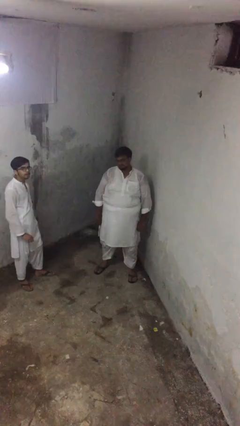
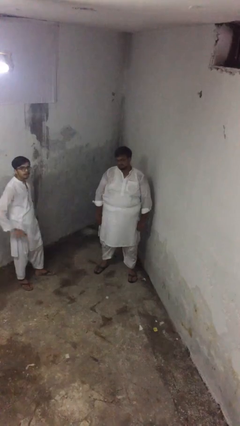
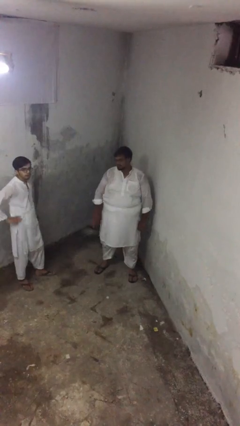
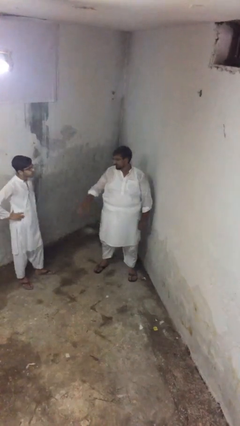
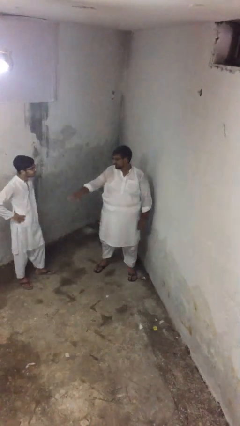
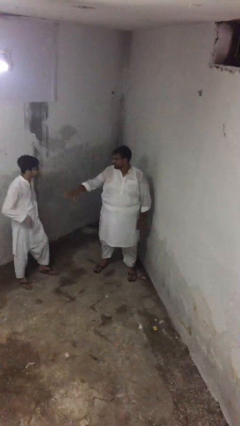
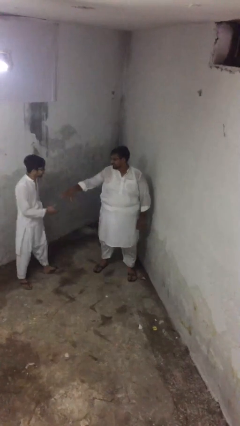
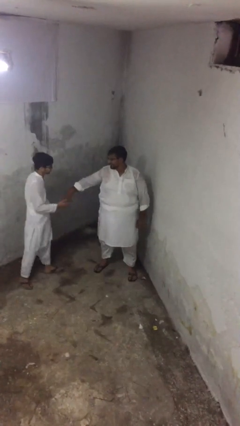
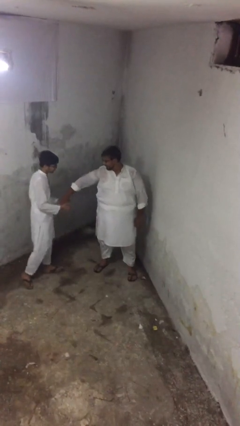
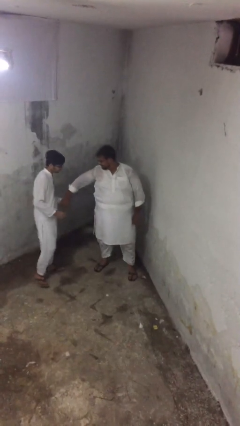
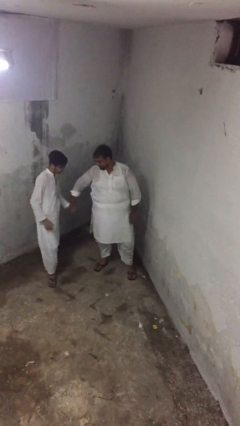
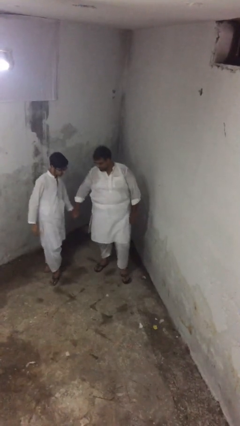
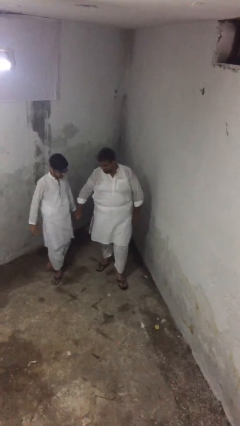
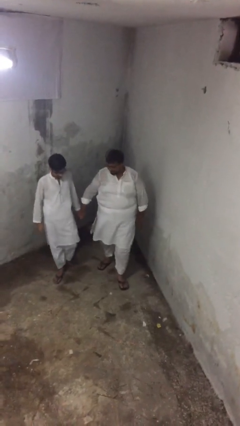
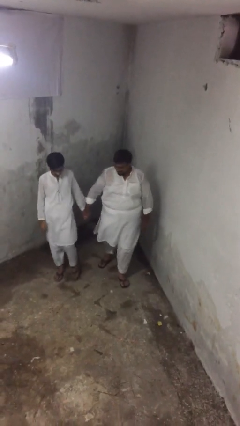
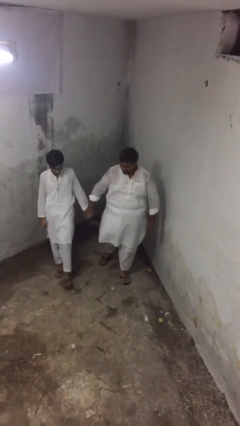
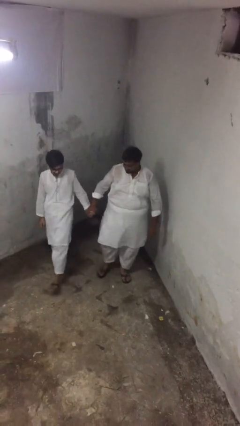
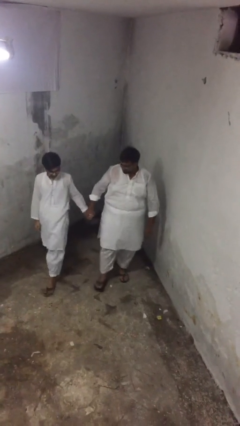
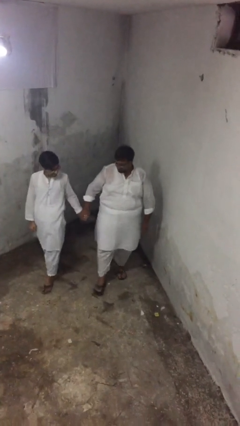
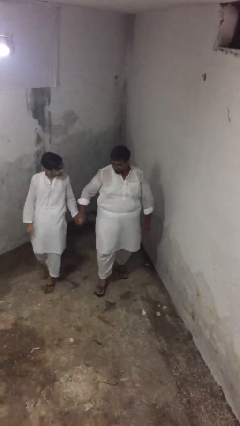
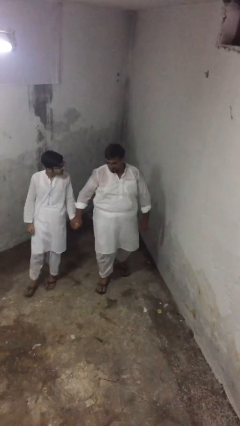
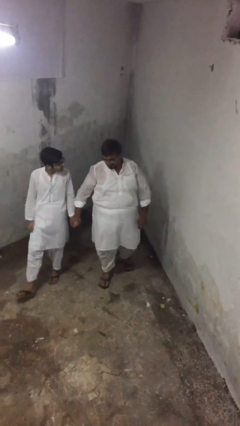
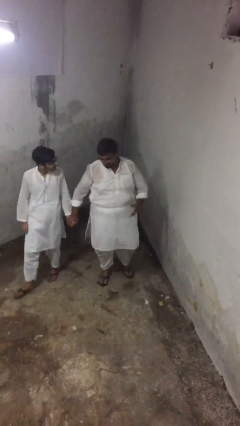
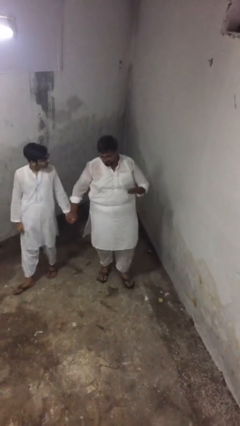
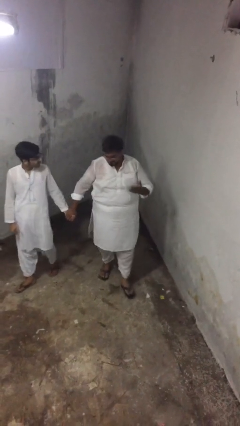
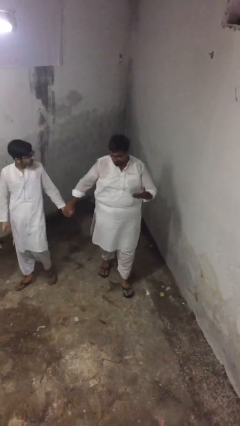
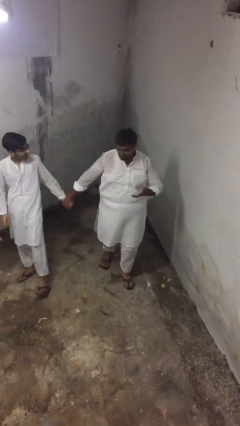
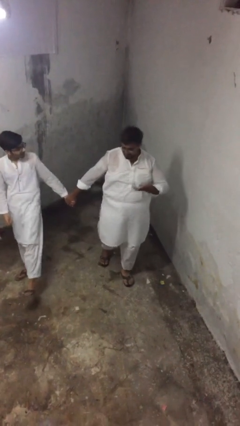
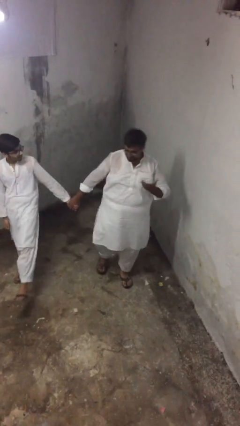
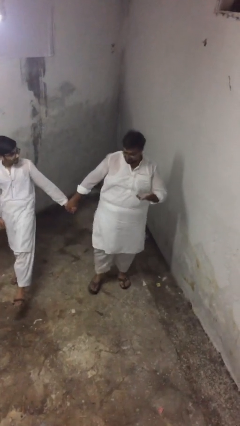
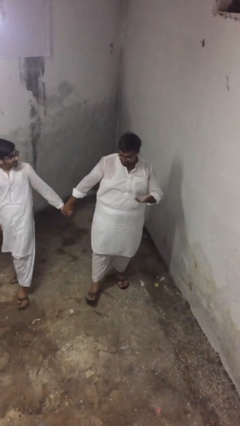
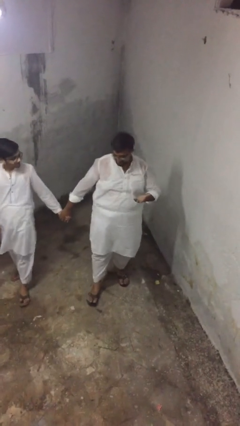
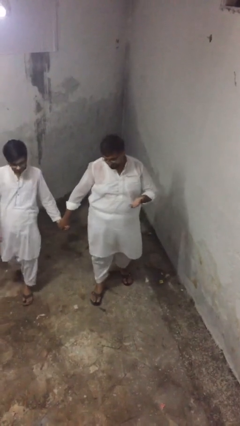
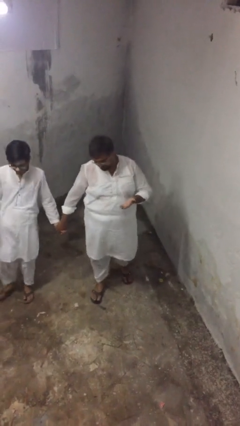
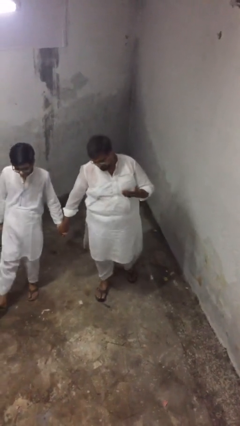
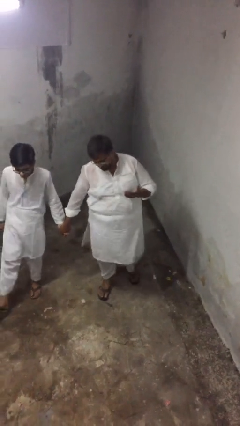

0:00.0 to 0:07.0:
person holds hand

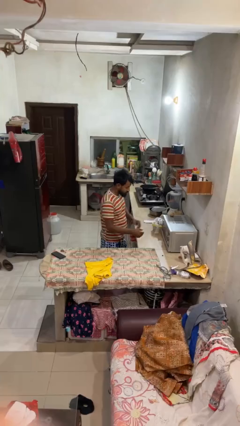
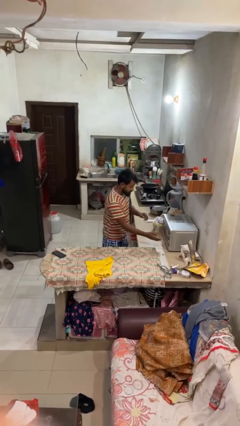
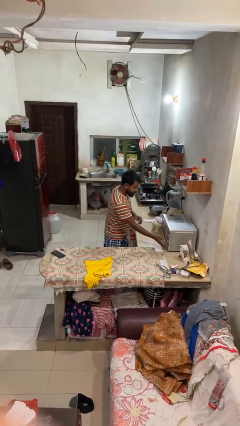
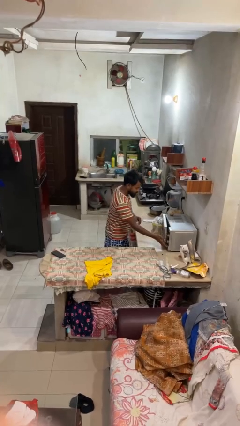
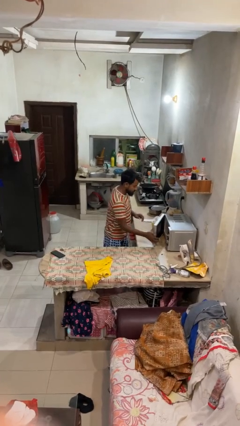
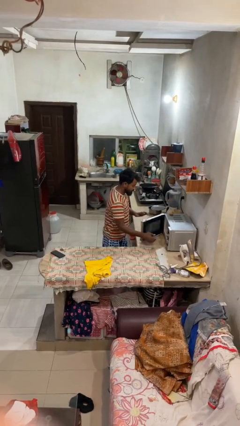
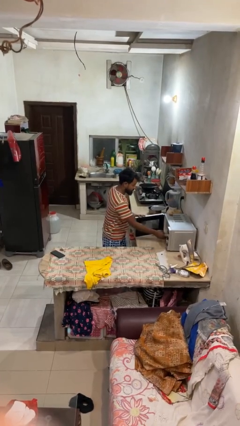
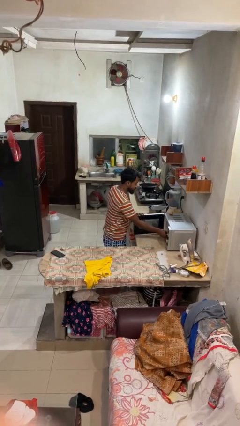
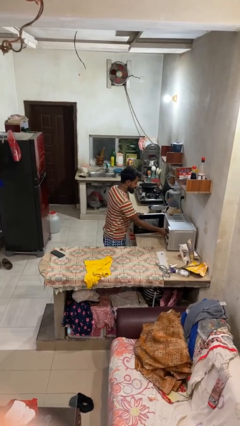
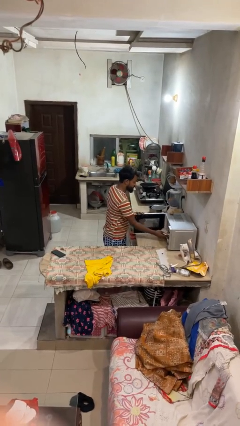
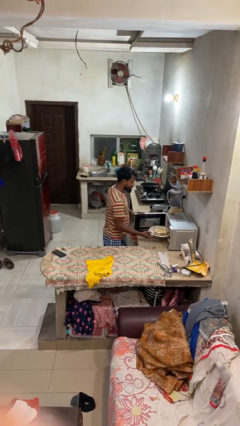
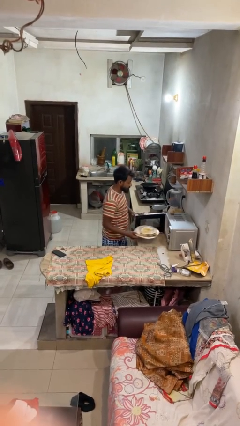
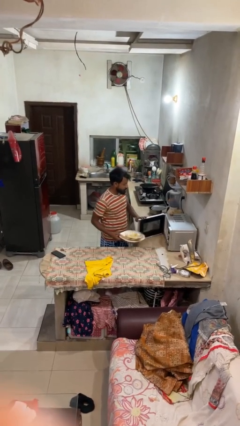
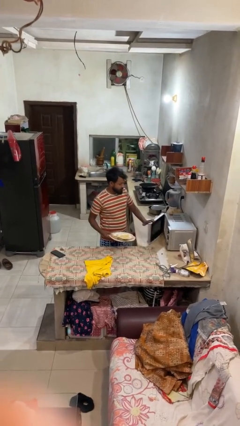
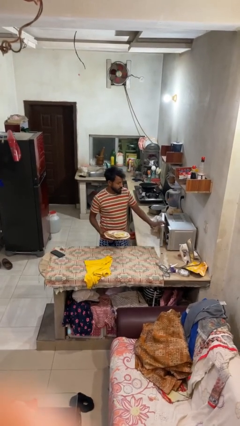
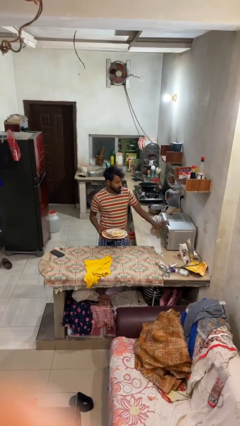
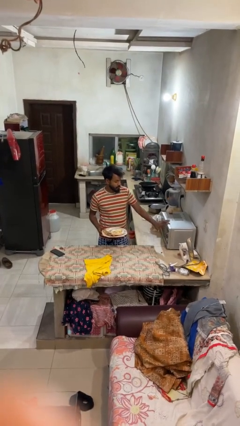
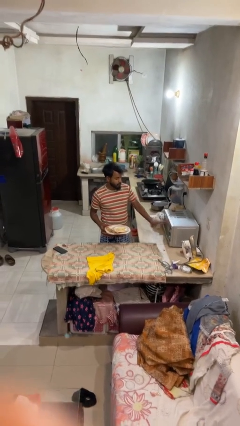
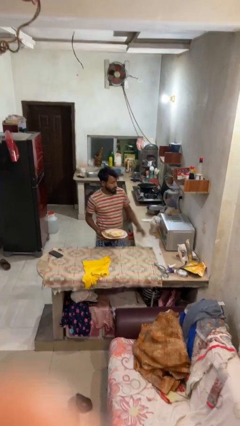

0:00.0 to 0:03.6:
person takes object from microwave

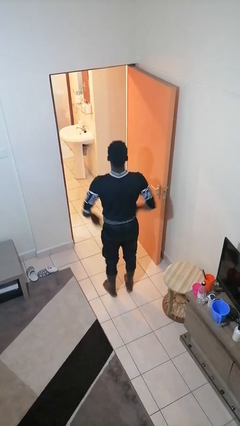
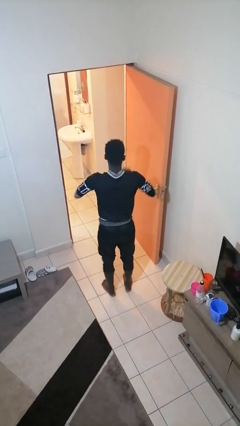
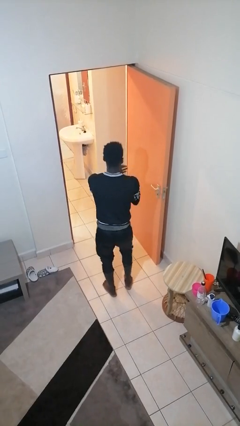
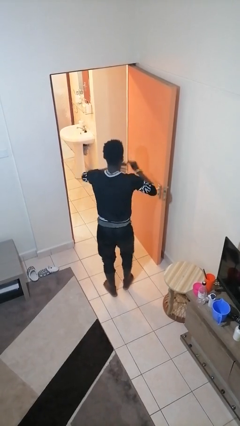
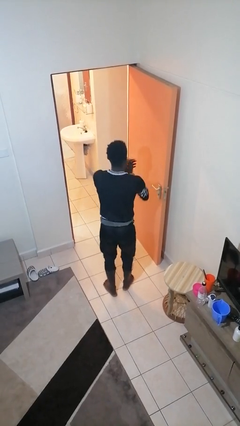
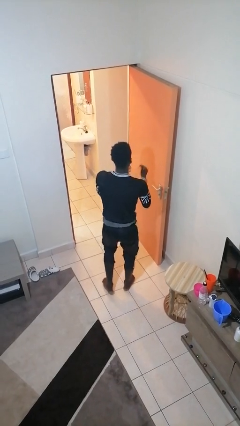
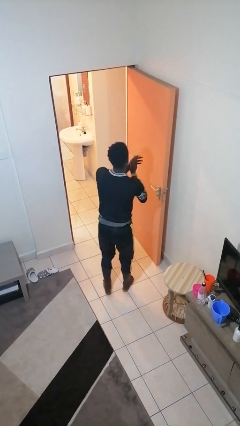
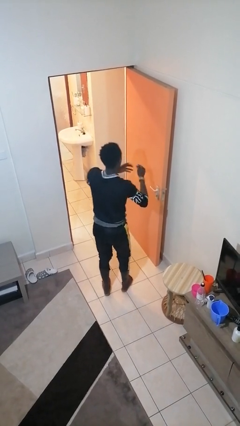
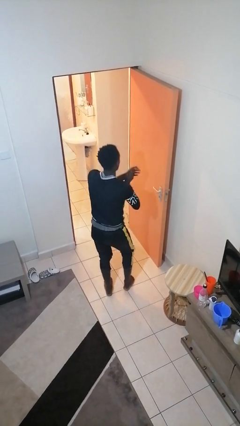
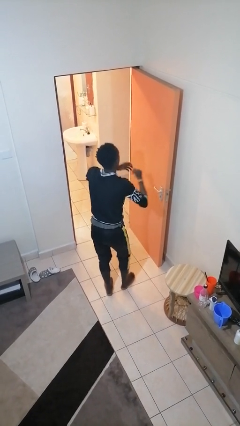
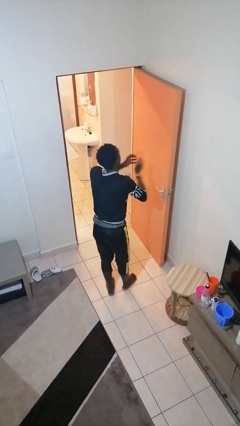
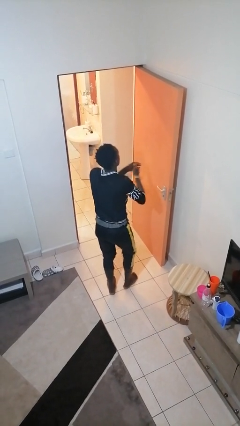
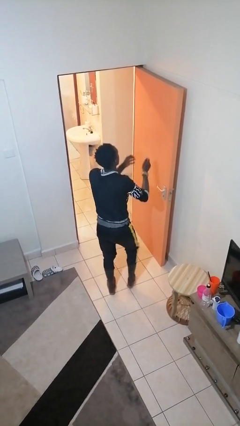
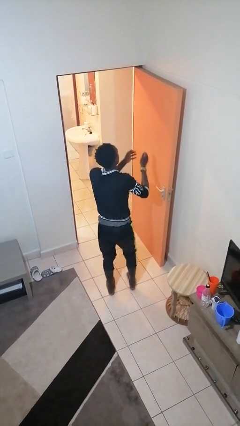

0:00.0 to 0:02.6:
person claps hands

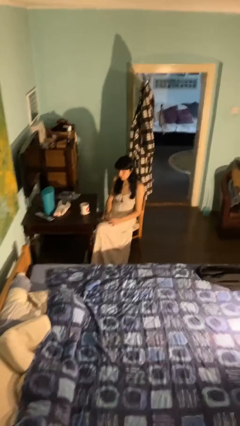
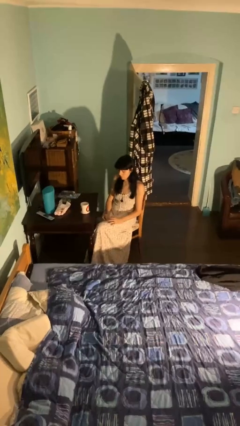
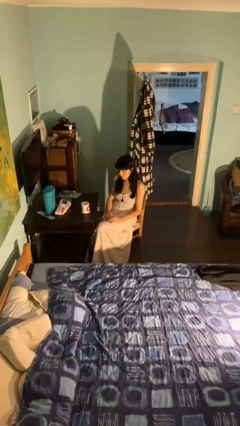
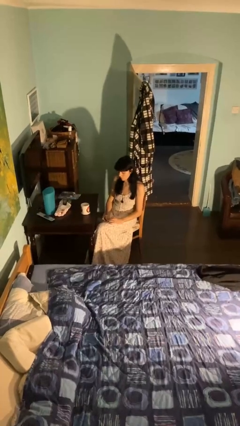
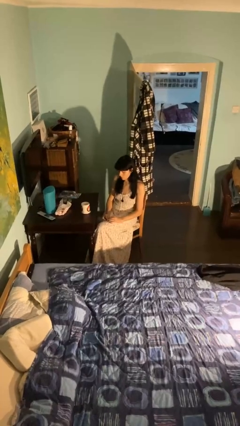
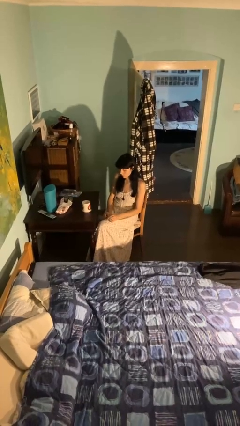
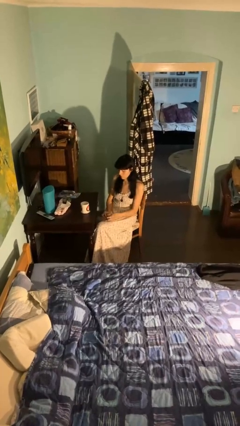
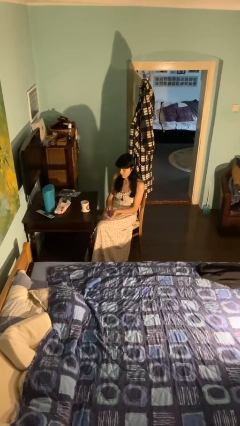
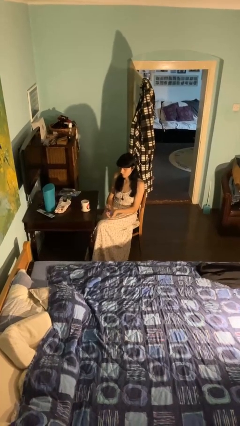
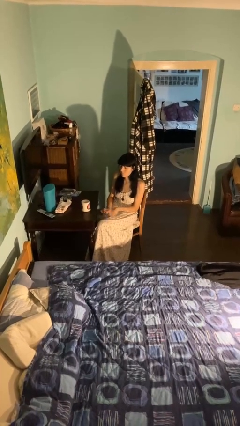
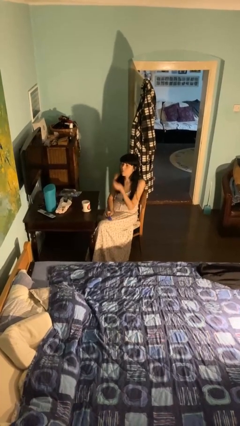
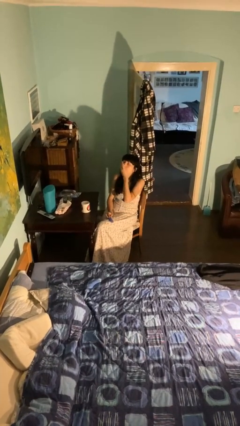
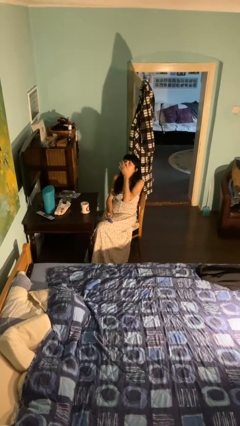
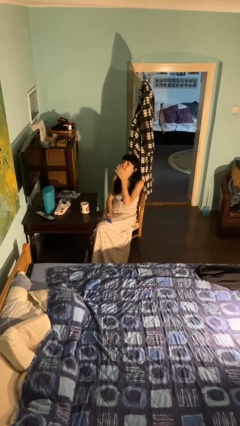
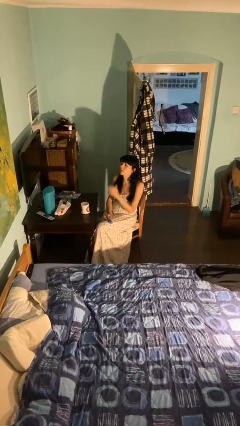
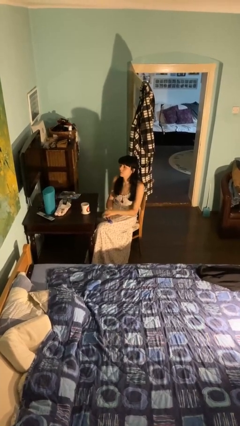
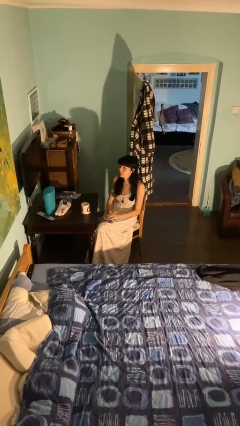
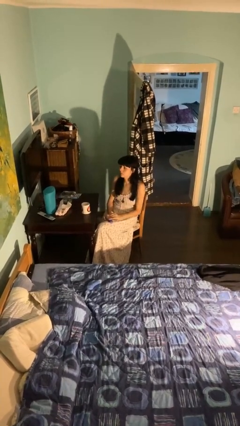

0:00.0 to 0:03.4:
person takes medicine pills

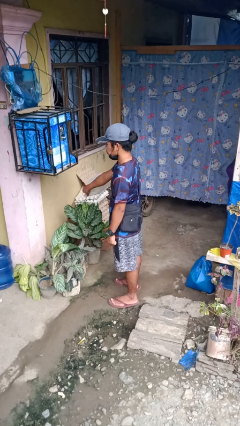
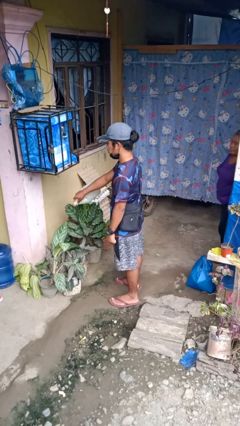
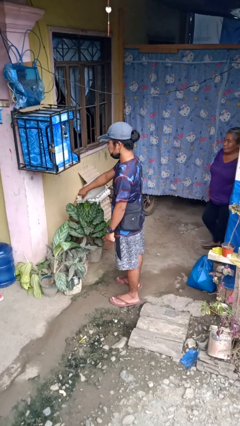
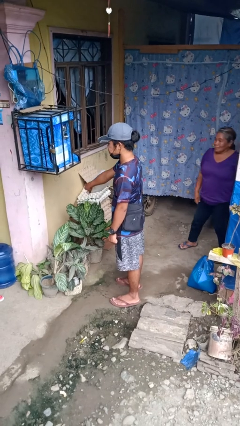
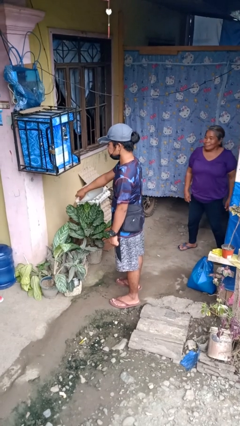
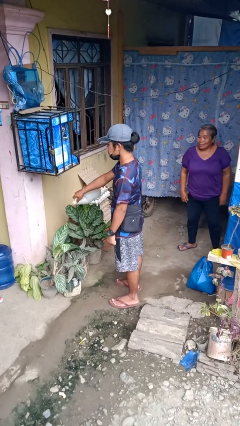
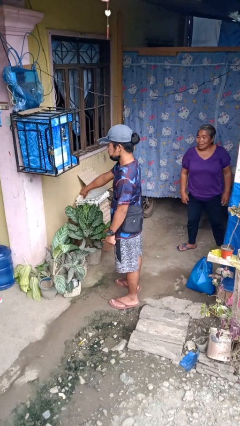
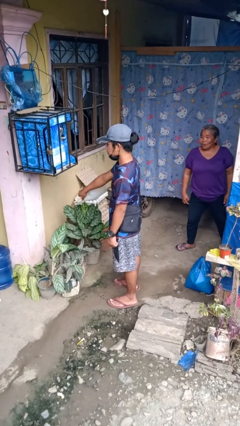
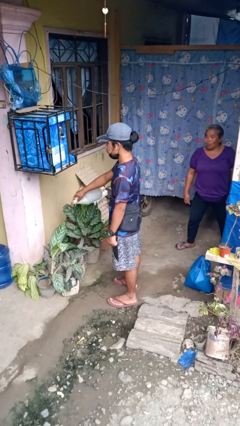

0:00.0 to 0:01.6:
person waters houseplant
